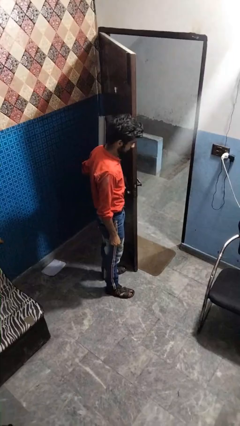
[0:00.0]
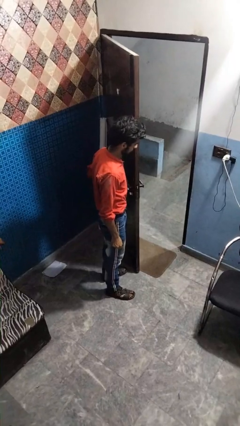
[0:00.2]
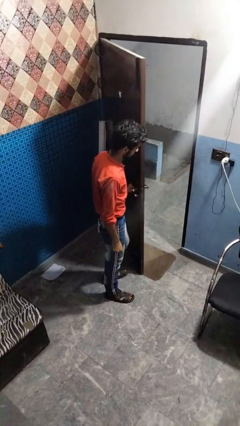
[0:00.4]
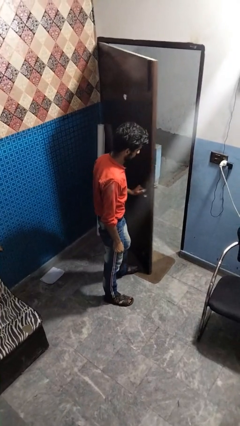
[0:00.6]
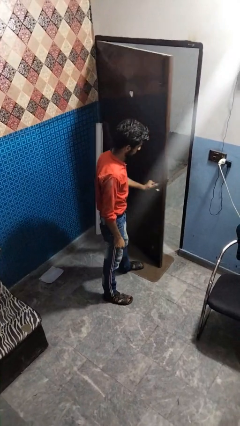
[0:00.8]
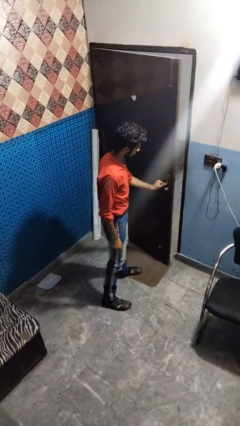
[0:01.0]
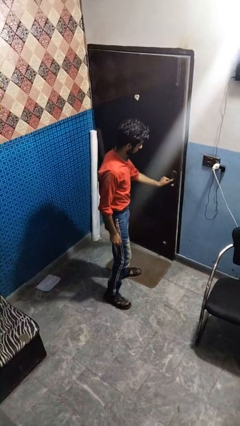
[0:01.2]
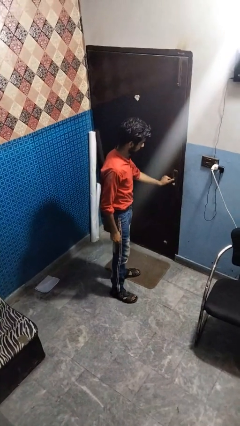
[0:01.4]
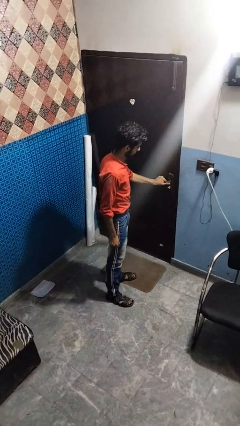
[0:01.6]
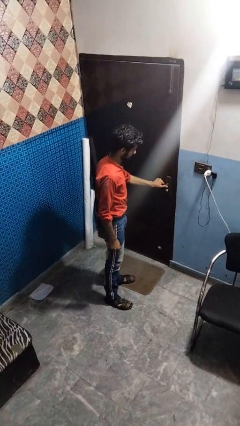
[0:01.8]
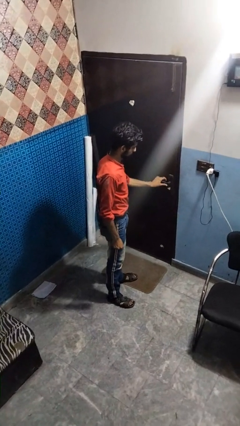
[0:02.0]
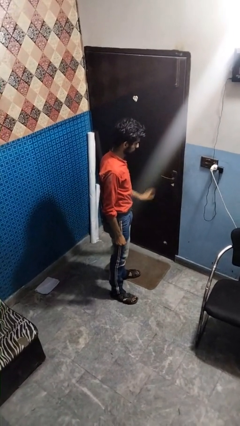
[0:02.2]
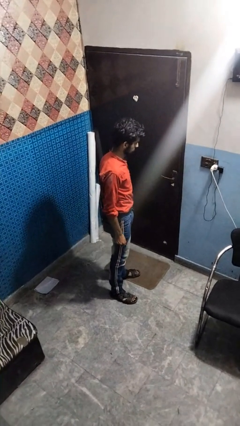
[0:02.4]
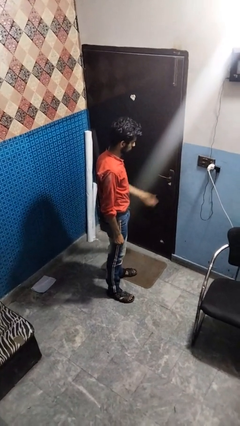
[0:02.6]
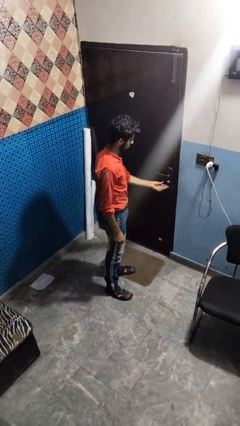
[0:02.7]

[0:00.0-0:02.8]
person closes facility door

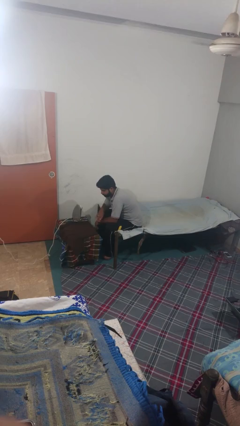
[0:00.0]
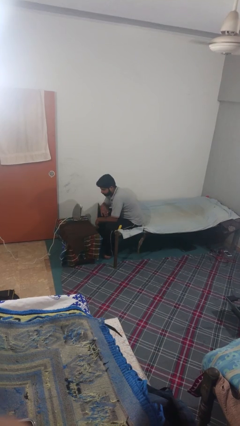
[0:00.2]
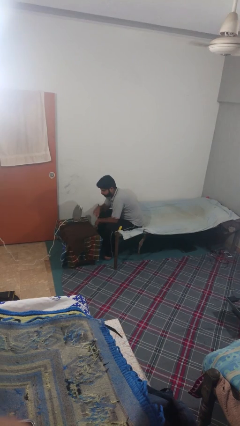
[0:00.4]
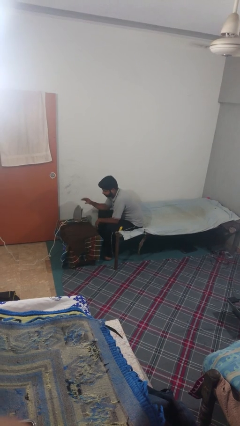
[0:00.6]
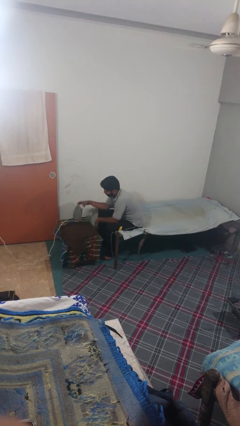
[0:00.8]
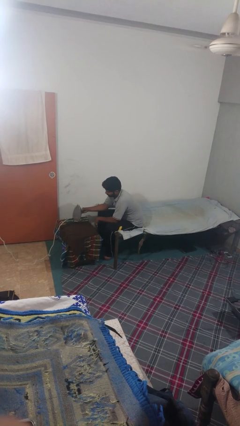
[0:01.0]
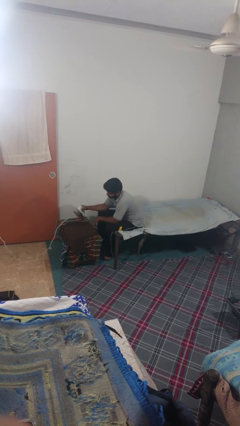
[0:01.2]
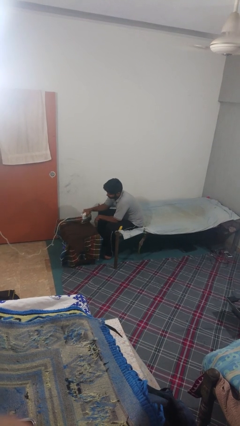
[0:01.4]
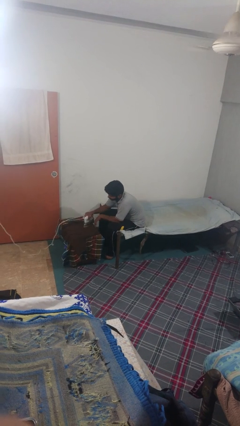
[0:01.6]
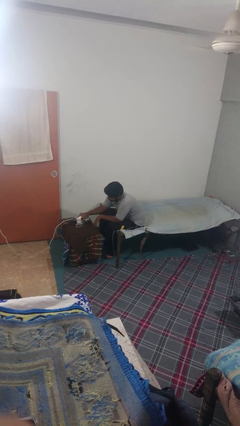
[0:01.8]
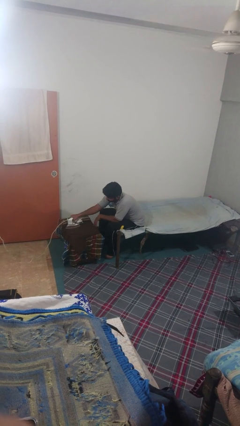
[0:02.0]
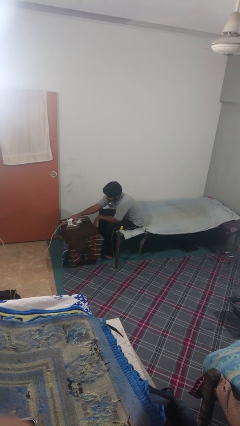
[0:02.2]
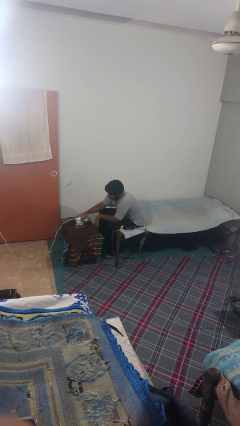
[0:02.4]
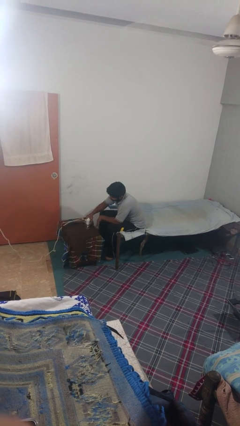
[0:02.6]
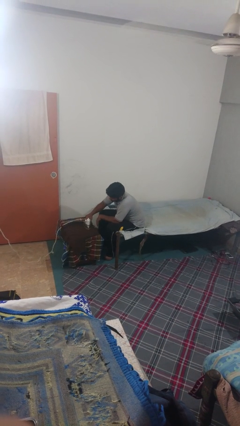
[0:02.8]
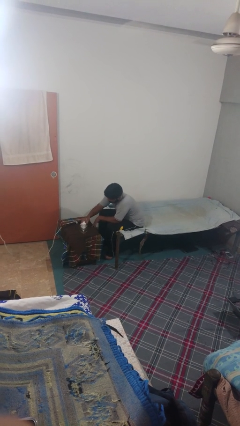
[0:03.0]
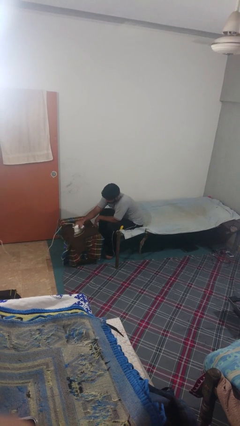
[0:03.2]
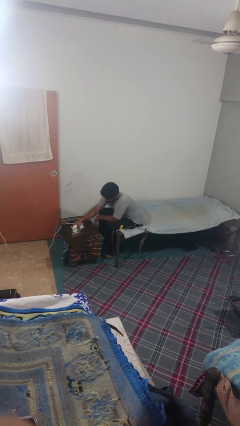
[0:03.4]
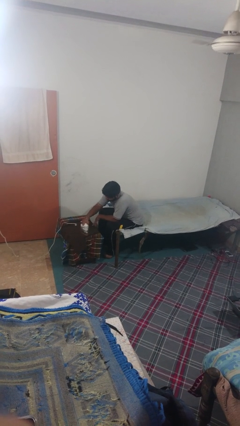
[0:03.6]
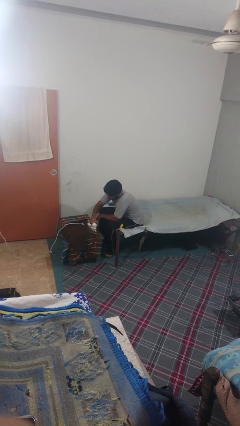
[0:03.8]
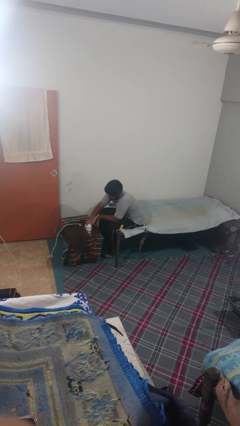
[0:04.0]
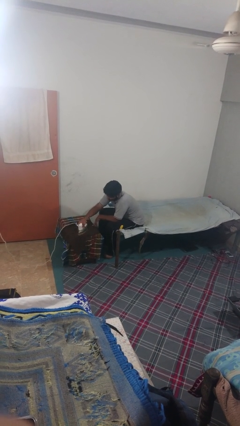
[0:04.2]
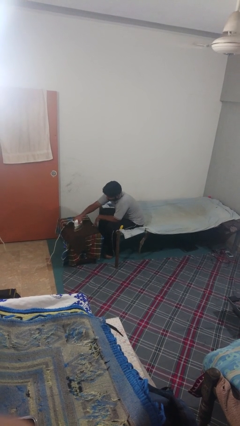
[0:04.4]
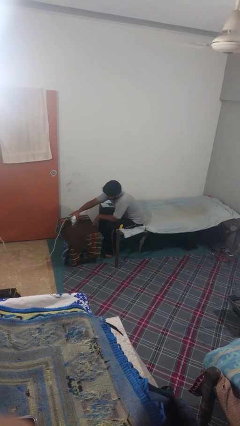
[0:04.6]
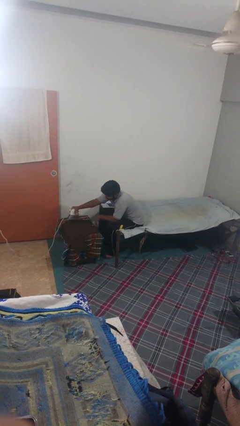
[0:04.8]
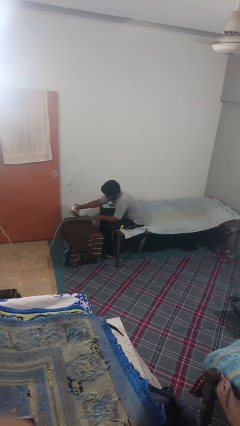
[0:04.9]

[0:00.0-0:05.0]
person irons clothes

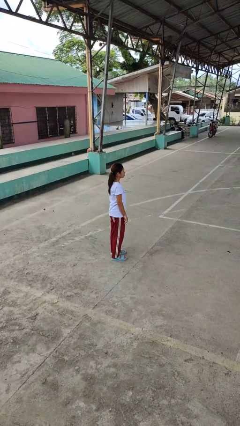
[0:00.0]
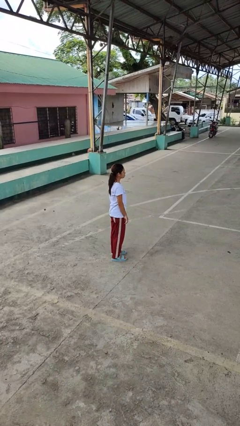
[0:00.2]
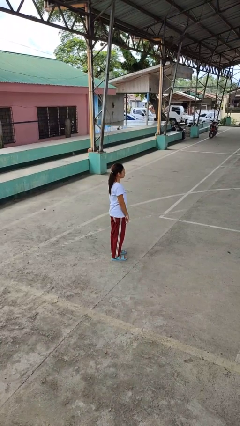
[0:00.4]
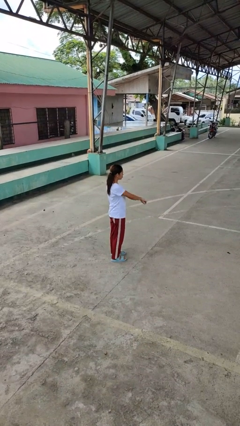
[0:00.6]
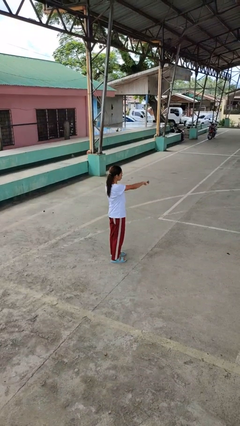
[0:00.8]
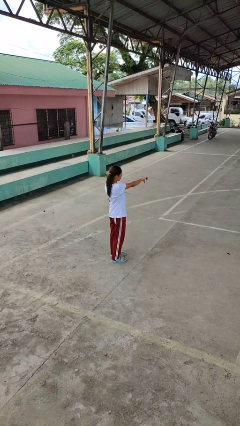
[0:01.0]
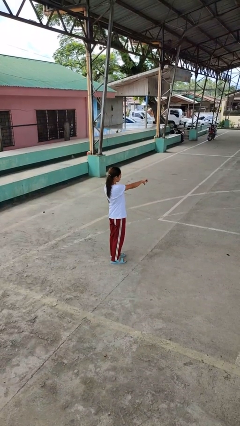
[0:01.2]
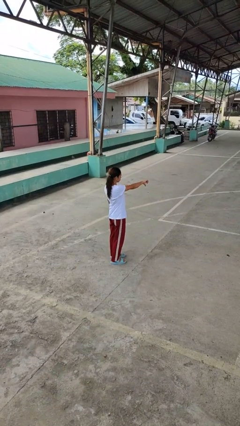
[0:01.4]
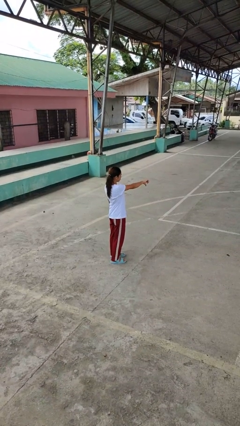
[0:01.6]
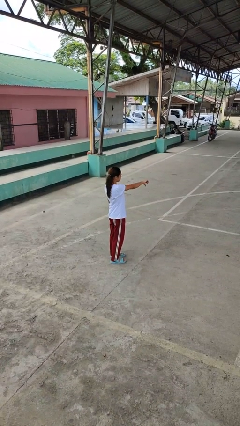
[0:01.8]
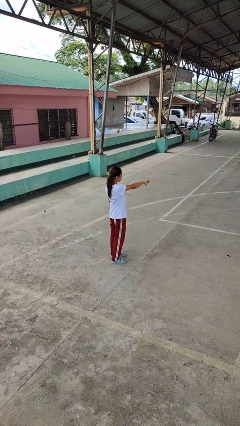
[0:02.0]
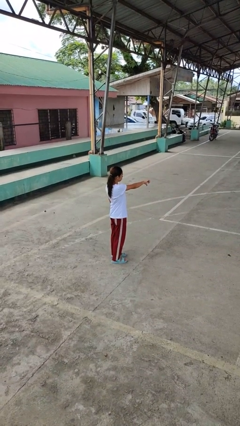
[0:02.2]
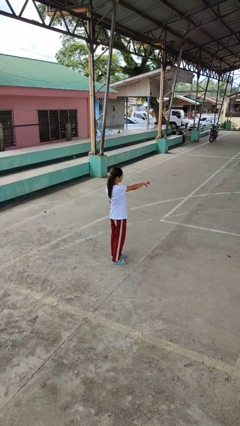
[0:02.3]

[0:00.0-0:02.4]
person gestures thumbs down

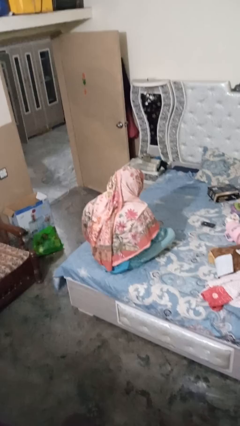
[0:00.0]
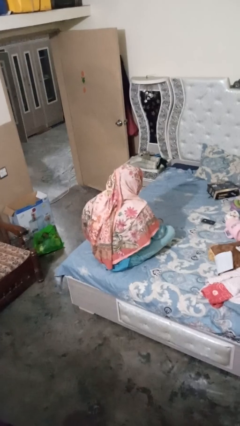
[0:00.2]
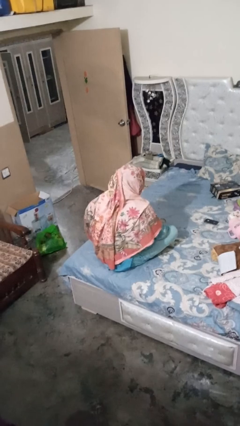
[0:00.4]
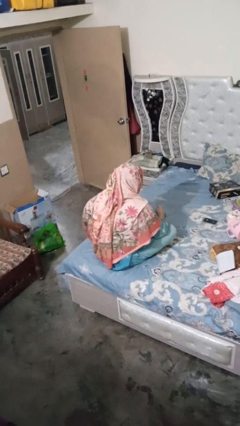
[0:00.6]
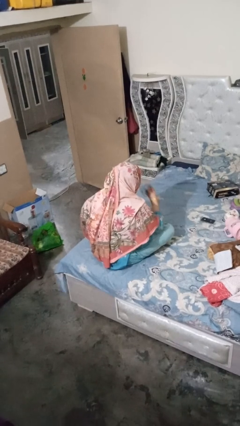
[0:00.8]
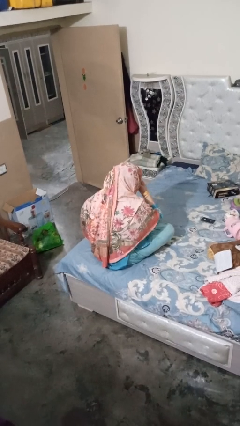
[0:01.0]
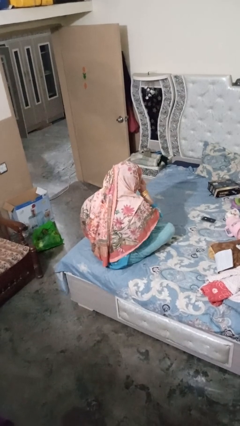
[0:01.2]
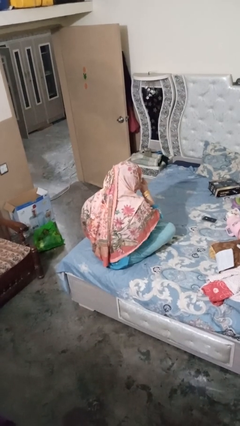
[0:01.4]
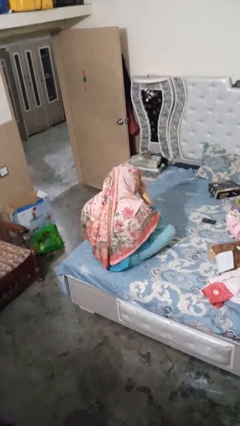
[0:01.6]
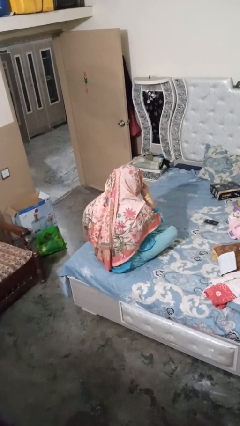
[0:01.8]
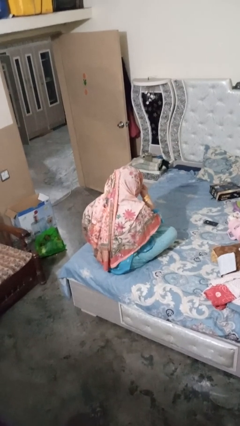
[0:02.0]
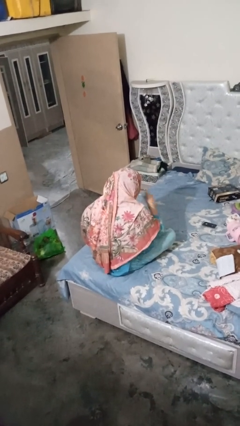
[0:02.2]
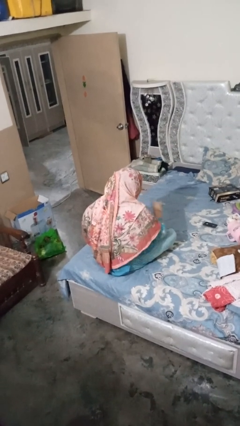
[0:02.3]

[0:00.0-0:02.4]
person blows nose

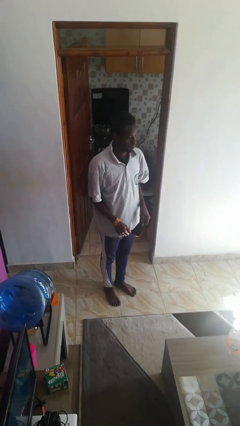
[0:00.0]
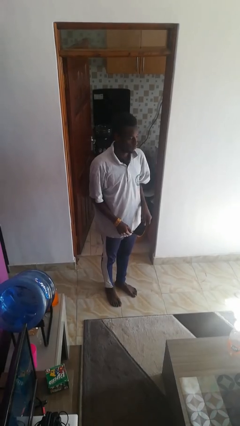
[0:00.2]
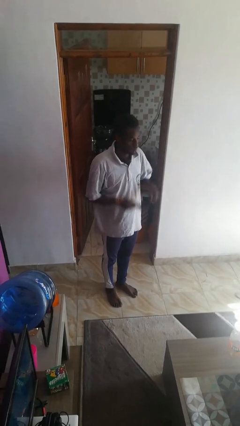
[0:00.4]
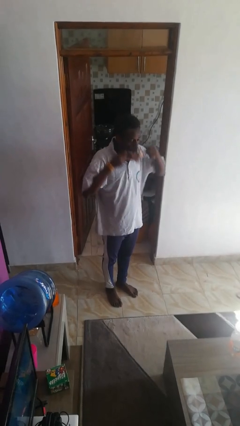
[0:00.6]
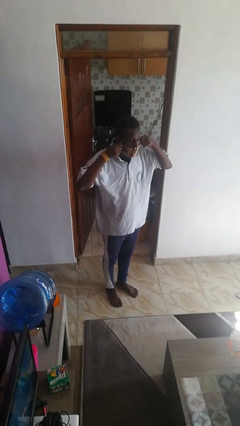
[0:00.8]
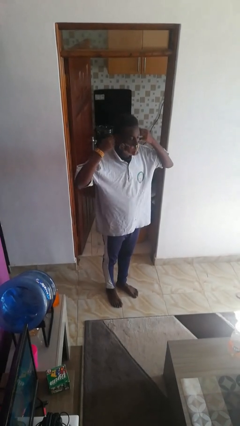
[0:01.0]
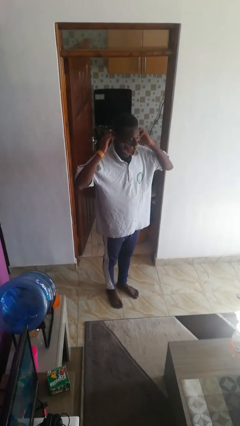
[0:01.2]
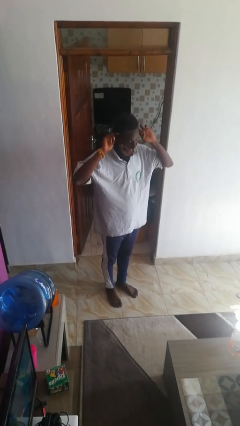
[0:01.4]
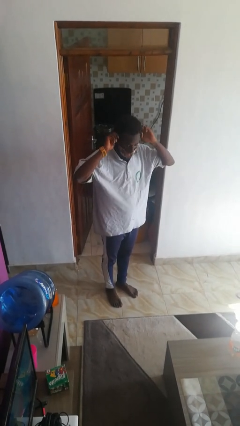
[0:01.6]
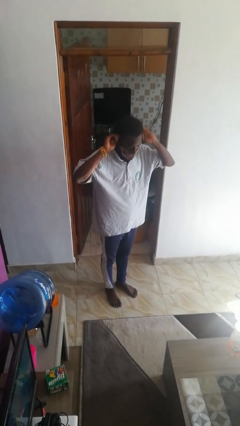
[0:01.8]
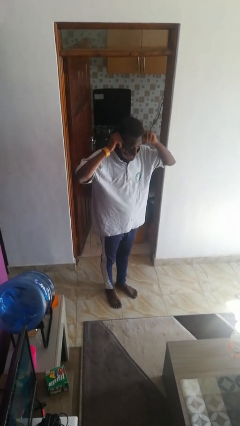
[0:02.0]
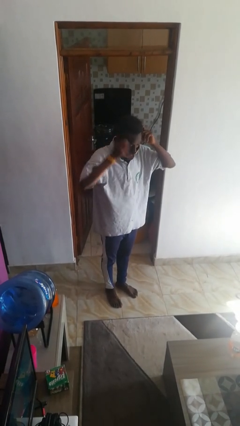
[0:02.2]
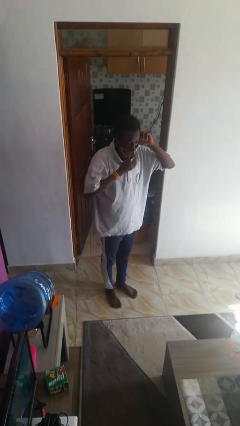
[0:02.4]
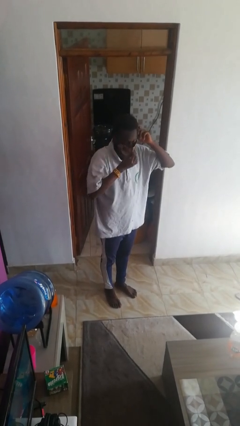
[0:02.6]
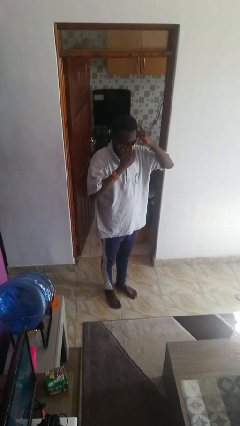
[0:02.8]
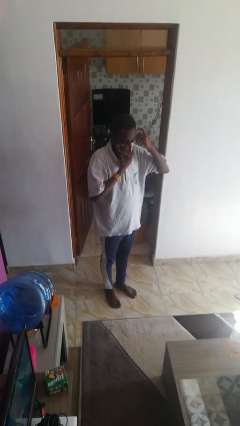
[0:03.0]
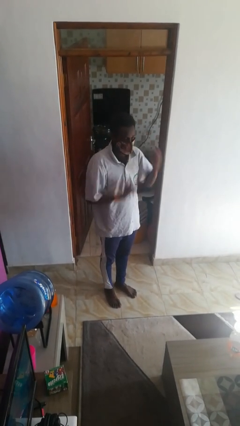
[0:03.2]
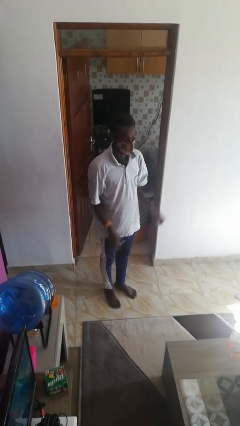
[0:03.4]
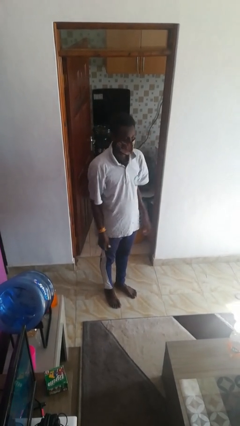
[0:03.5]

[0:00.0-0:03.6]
person puts on facemask

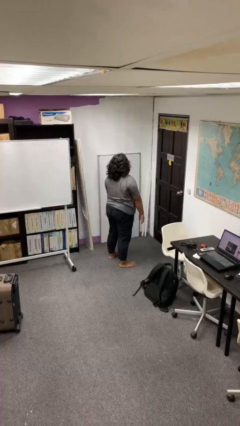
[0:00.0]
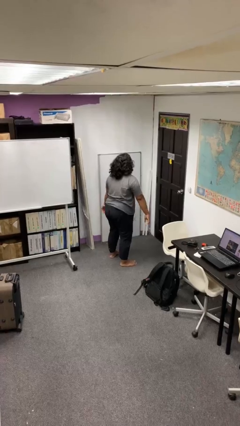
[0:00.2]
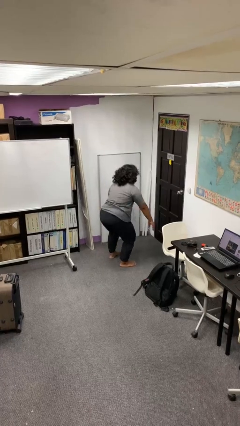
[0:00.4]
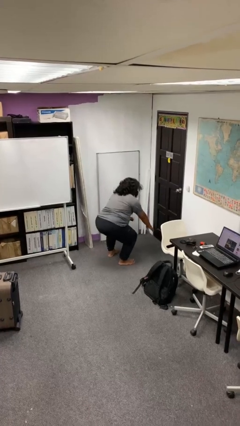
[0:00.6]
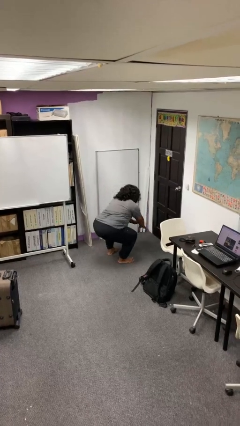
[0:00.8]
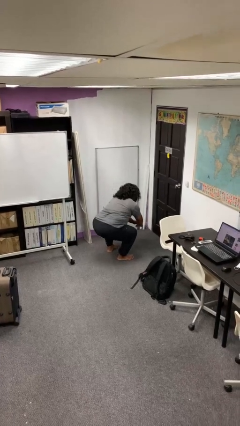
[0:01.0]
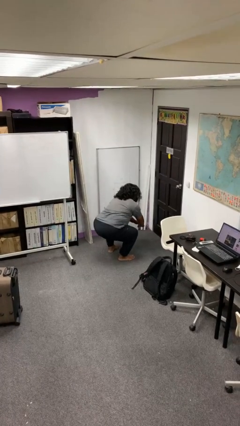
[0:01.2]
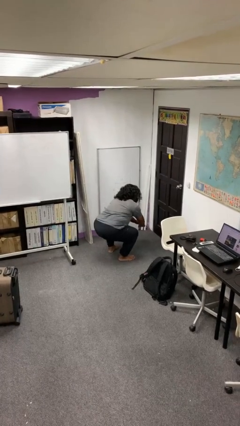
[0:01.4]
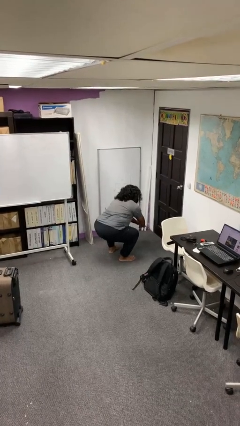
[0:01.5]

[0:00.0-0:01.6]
person squats
